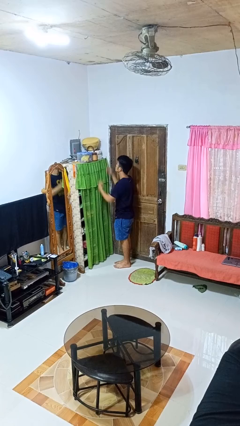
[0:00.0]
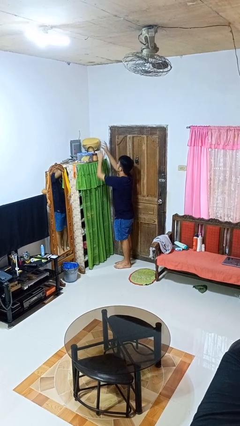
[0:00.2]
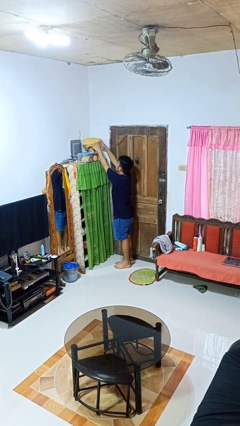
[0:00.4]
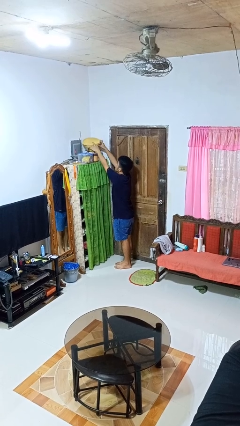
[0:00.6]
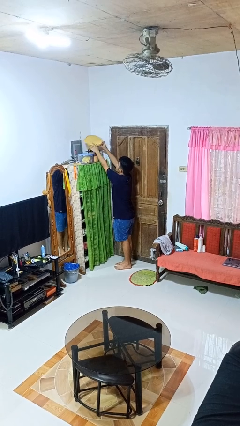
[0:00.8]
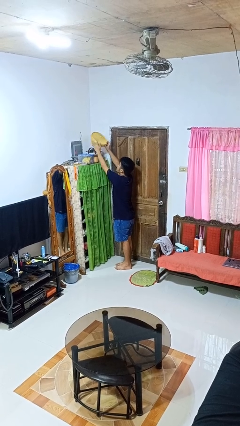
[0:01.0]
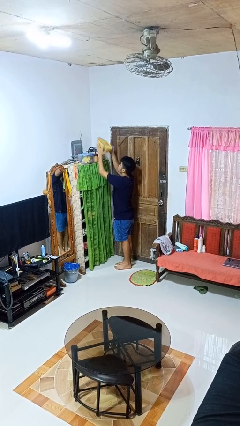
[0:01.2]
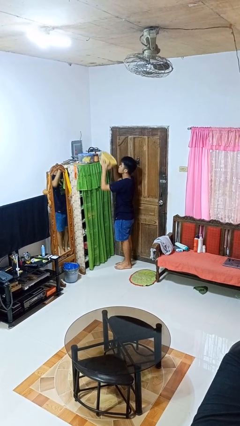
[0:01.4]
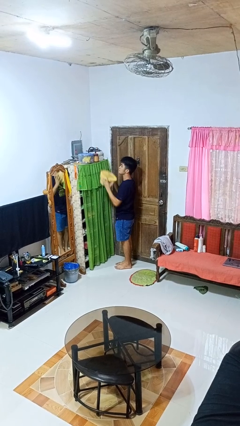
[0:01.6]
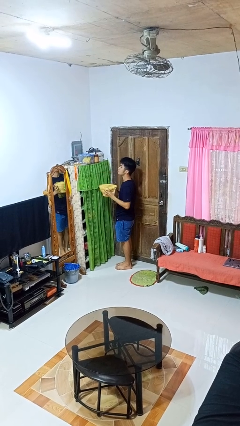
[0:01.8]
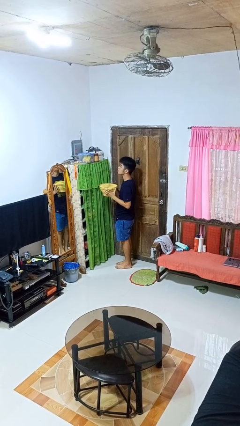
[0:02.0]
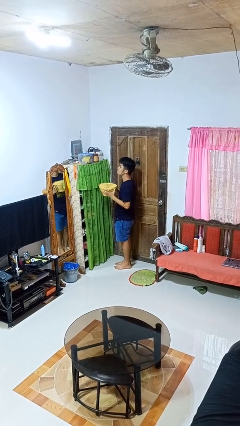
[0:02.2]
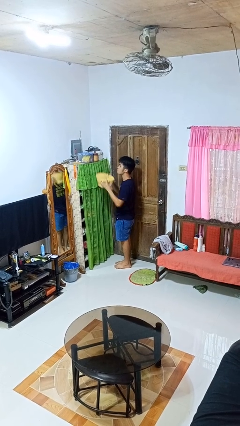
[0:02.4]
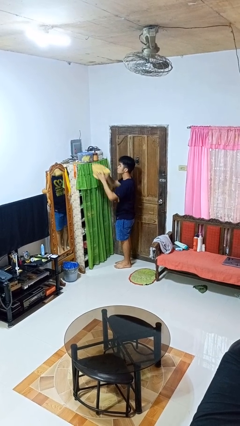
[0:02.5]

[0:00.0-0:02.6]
person picks up object from shelf

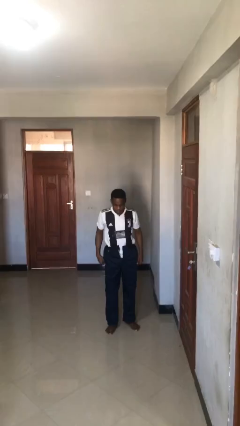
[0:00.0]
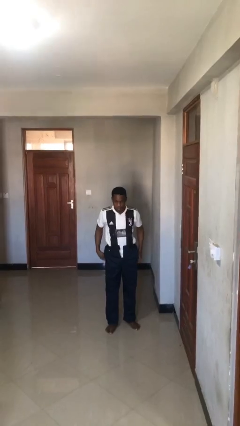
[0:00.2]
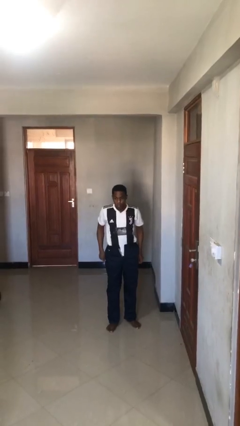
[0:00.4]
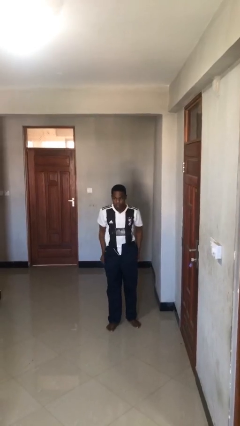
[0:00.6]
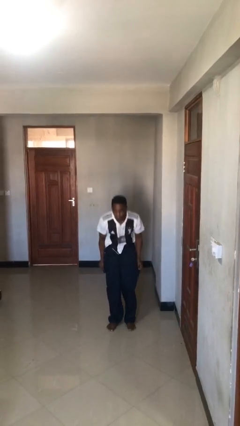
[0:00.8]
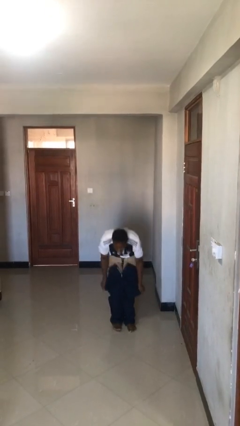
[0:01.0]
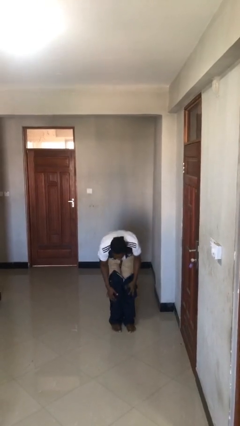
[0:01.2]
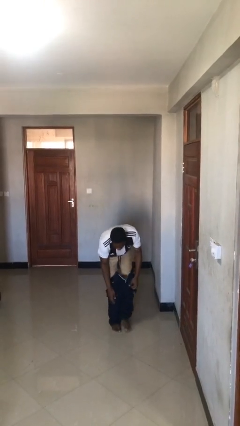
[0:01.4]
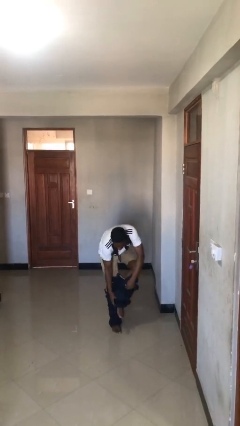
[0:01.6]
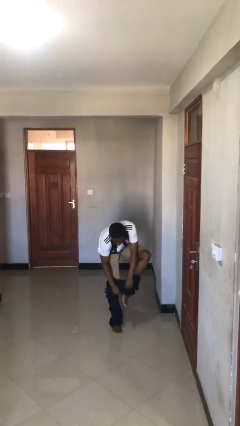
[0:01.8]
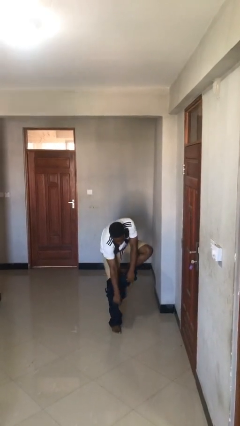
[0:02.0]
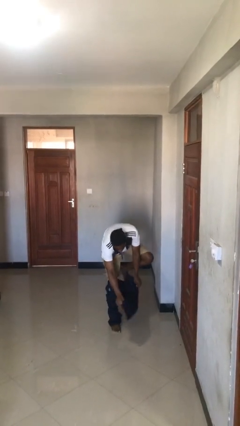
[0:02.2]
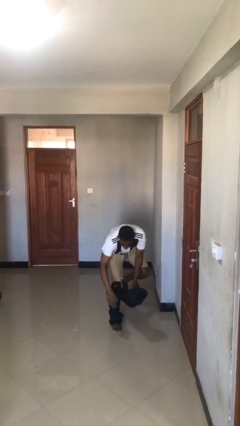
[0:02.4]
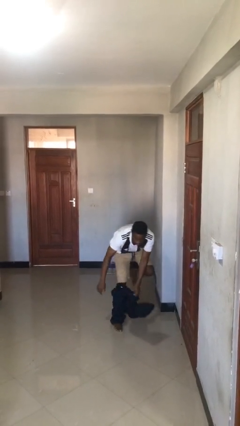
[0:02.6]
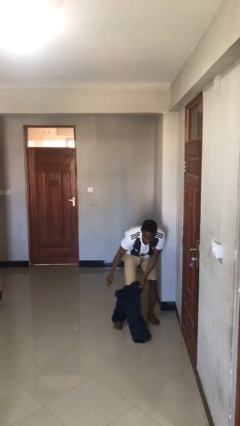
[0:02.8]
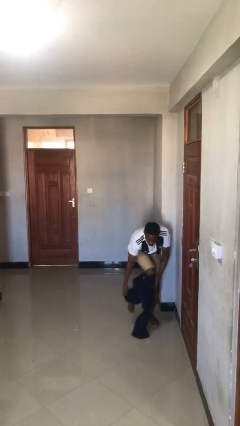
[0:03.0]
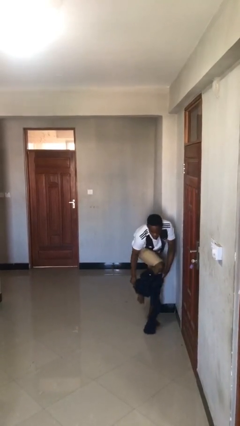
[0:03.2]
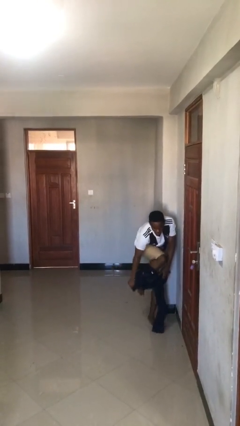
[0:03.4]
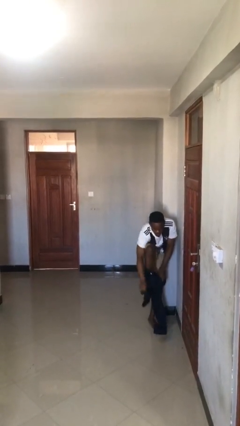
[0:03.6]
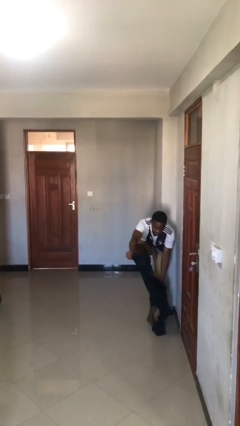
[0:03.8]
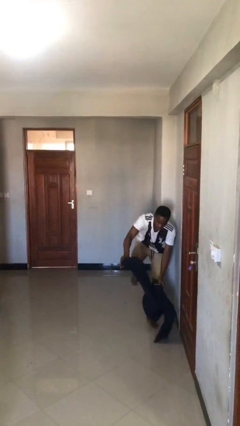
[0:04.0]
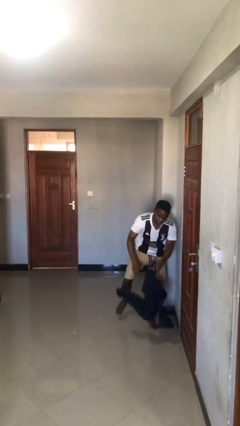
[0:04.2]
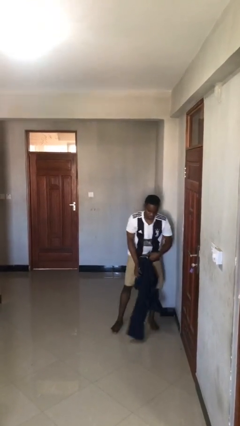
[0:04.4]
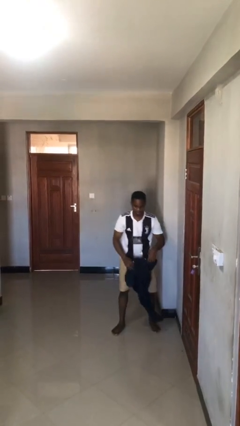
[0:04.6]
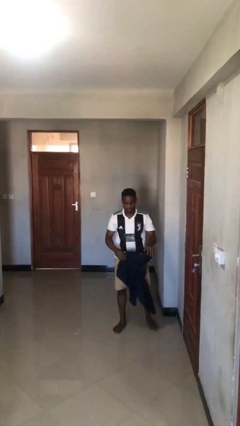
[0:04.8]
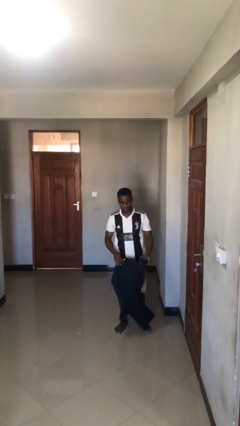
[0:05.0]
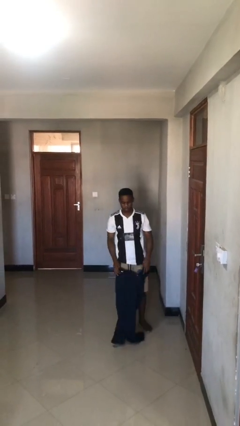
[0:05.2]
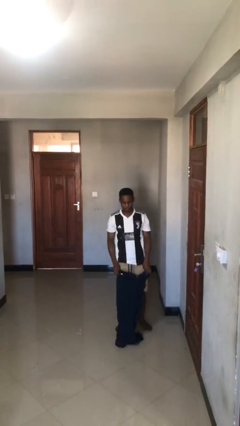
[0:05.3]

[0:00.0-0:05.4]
person takes off pants

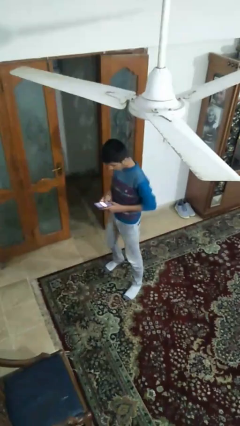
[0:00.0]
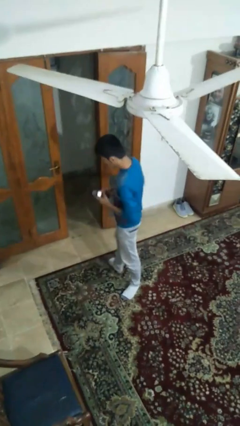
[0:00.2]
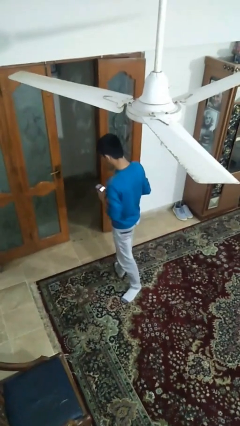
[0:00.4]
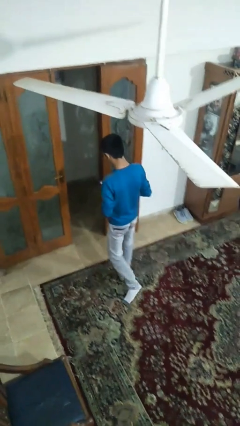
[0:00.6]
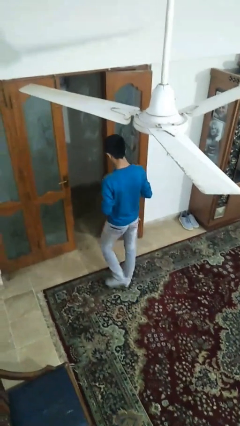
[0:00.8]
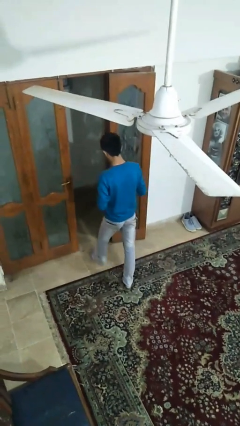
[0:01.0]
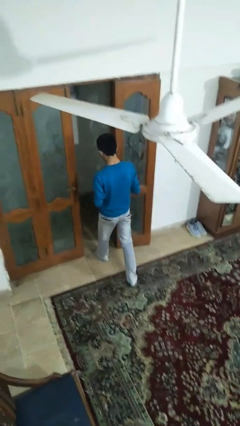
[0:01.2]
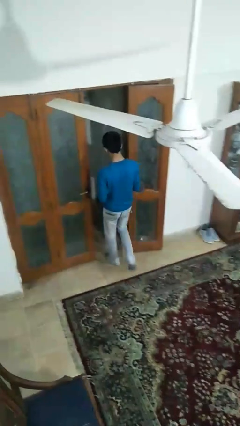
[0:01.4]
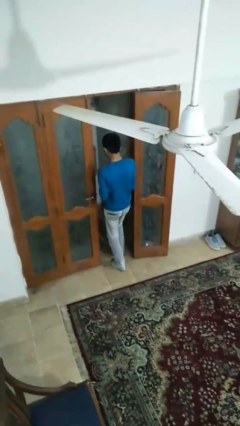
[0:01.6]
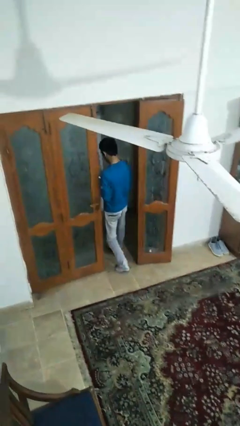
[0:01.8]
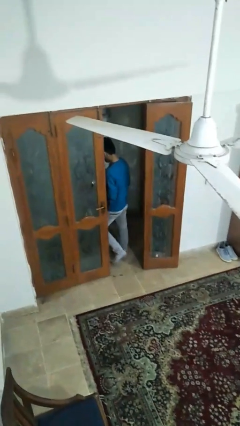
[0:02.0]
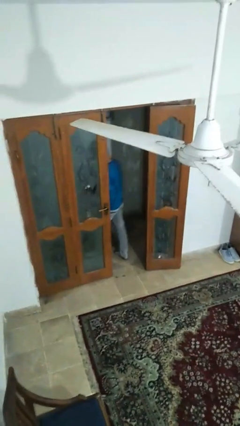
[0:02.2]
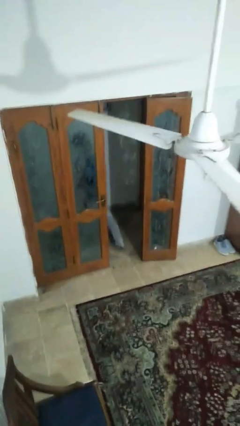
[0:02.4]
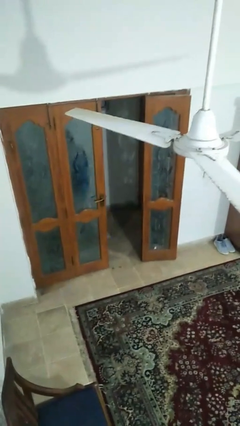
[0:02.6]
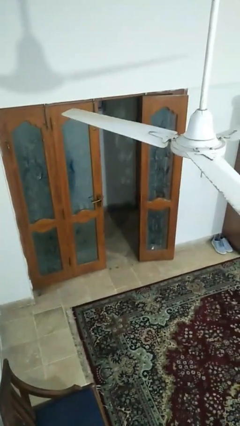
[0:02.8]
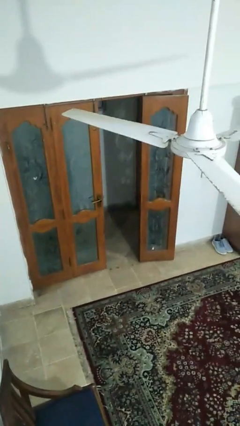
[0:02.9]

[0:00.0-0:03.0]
person closes facility door

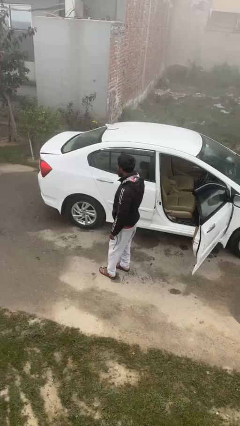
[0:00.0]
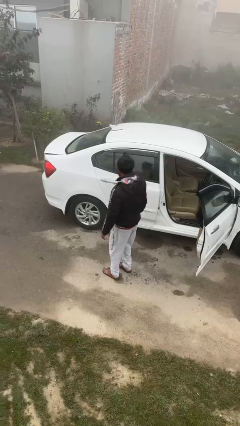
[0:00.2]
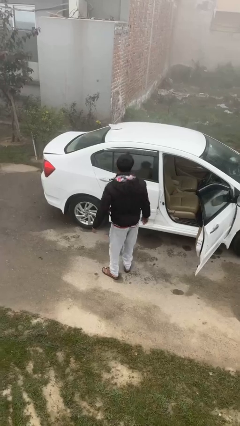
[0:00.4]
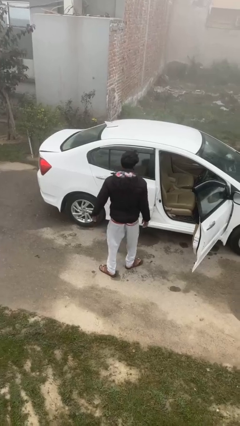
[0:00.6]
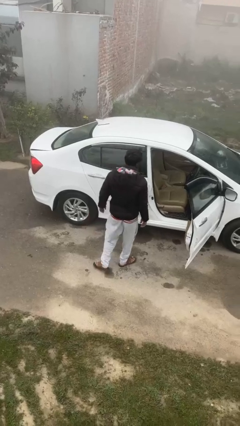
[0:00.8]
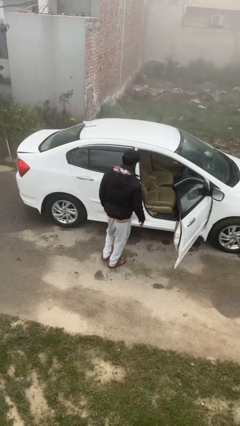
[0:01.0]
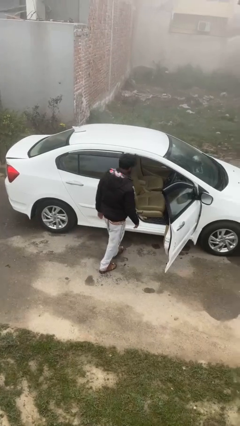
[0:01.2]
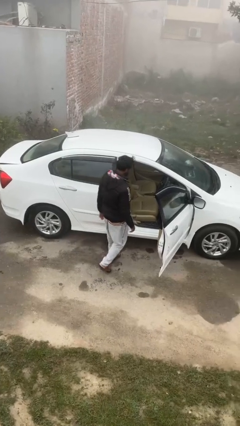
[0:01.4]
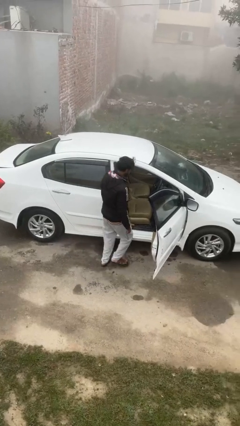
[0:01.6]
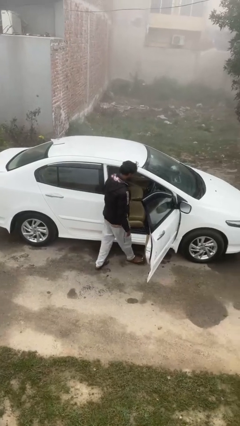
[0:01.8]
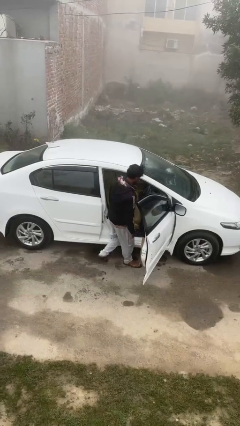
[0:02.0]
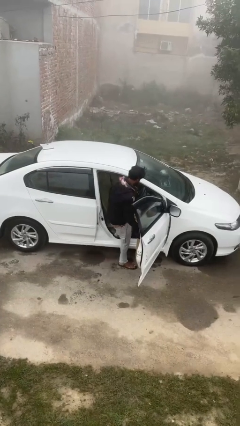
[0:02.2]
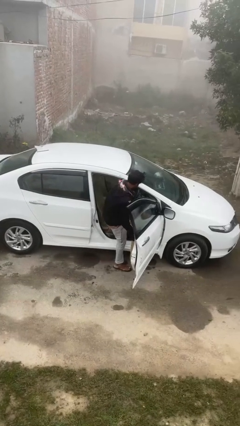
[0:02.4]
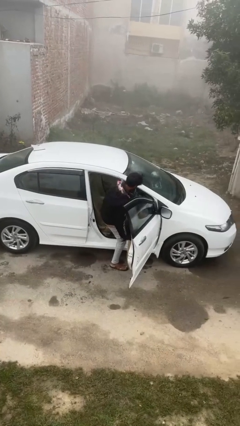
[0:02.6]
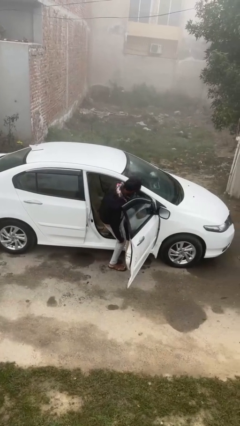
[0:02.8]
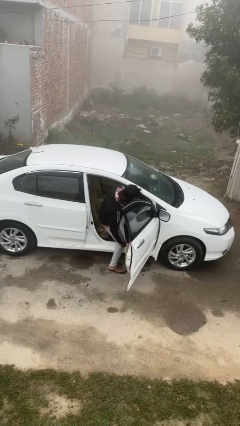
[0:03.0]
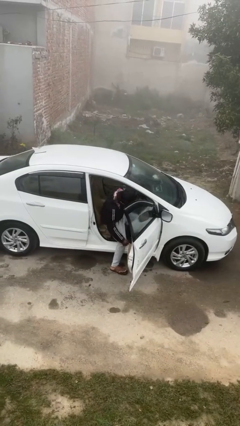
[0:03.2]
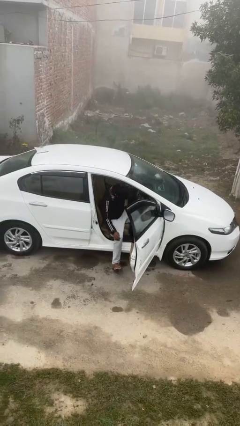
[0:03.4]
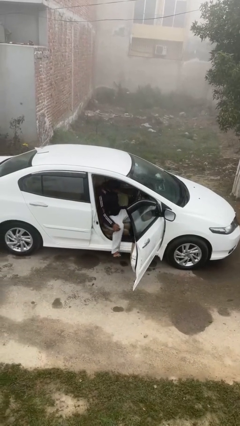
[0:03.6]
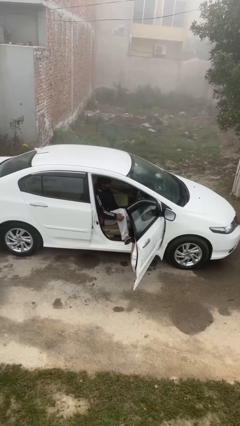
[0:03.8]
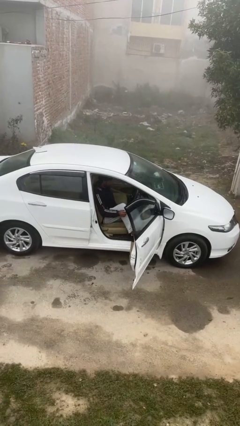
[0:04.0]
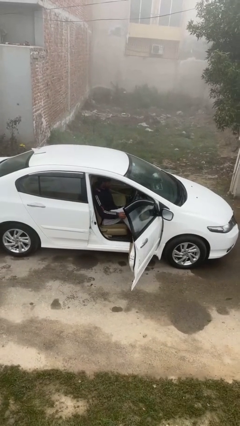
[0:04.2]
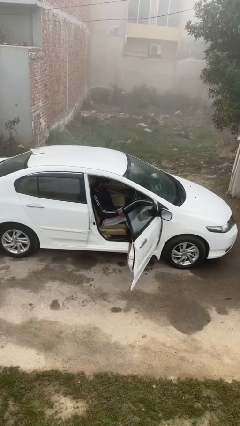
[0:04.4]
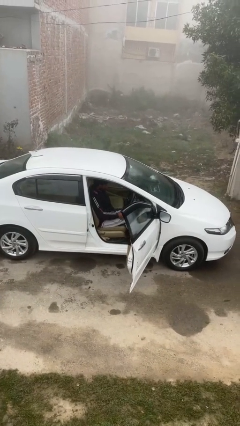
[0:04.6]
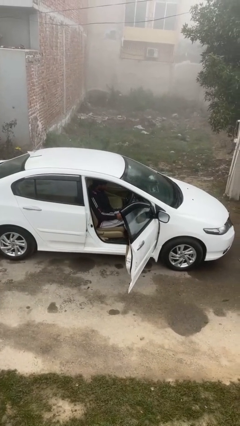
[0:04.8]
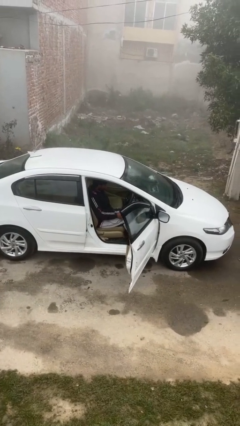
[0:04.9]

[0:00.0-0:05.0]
person enters car

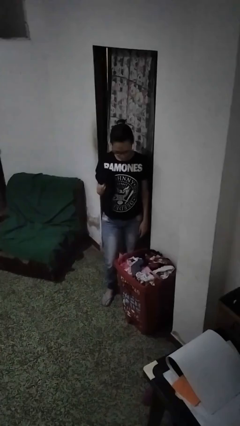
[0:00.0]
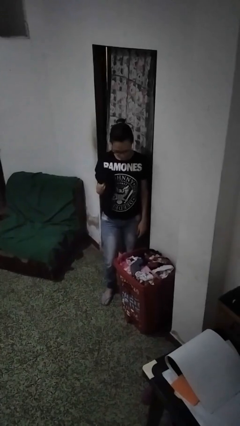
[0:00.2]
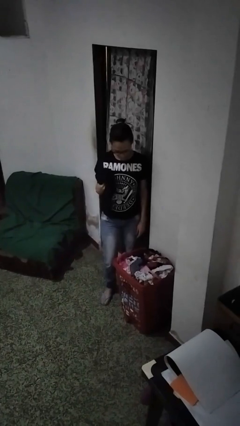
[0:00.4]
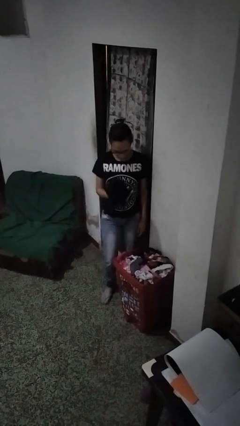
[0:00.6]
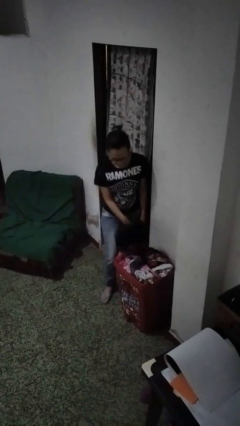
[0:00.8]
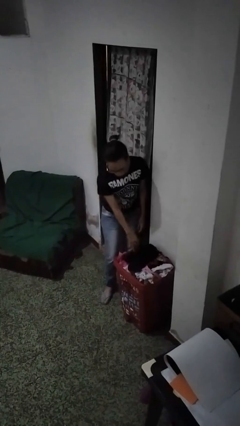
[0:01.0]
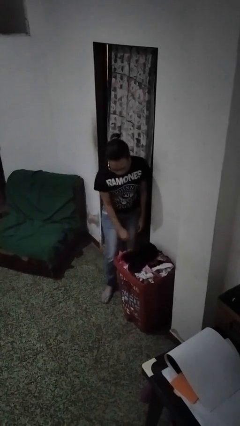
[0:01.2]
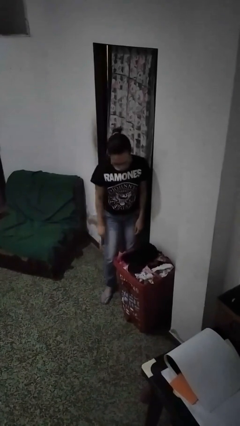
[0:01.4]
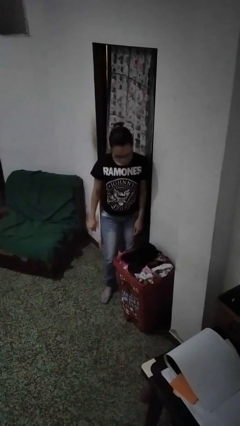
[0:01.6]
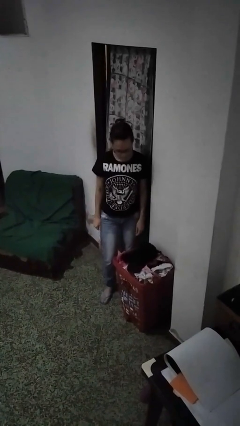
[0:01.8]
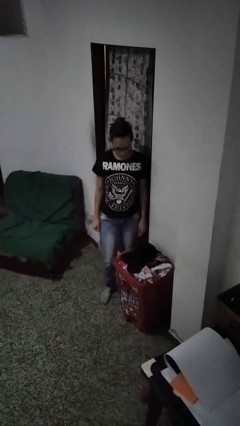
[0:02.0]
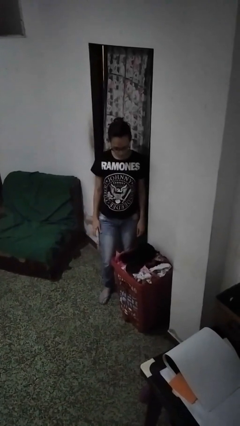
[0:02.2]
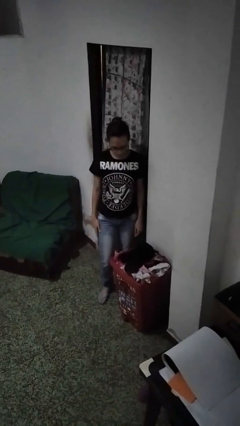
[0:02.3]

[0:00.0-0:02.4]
person puts object into basket
